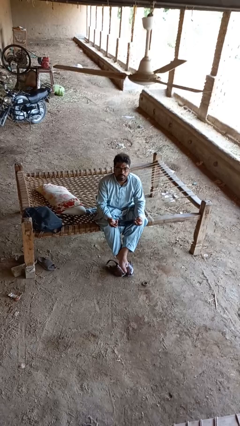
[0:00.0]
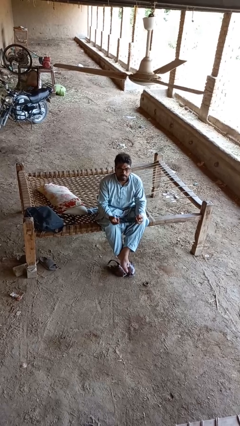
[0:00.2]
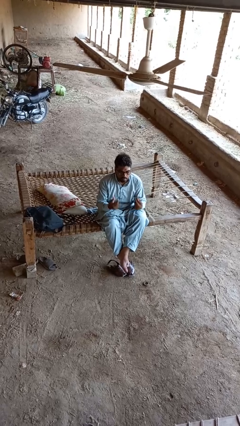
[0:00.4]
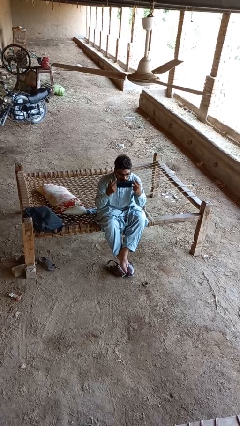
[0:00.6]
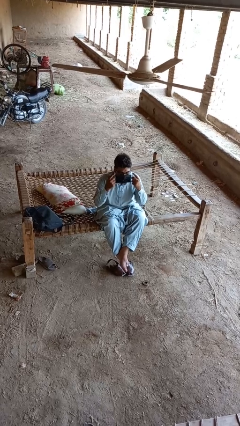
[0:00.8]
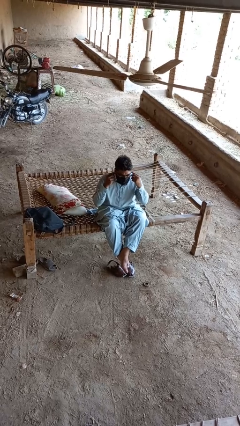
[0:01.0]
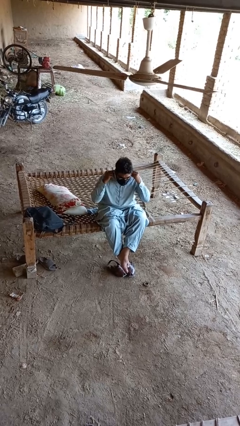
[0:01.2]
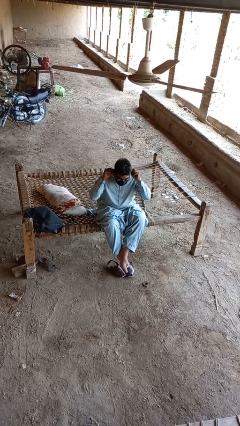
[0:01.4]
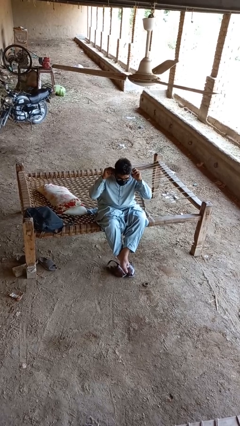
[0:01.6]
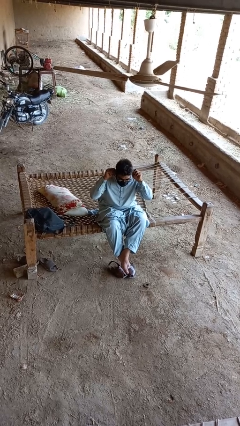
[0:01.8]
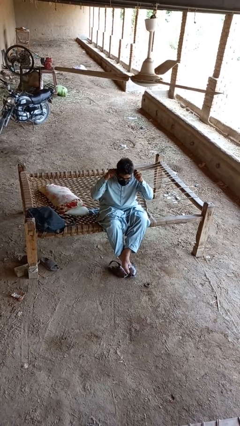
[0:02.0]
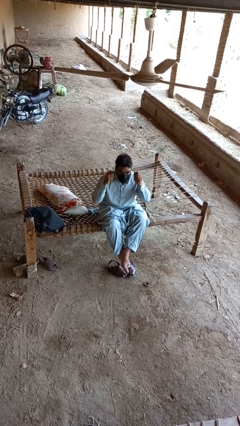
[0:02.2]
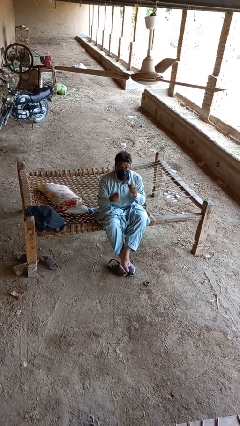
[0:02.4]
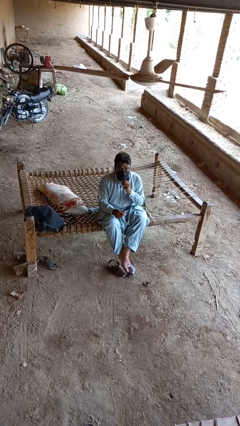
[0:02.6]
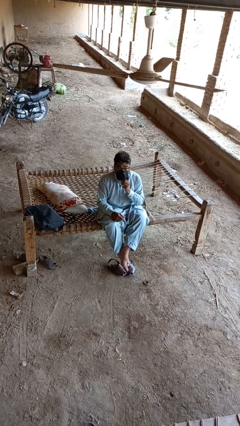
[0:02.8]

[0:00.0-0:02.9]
person puts on facemask

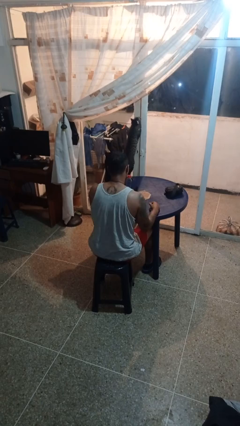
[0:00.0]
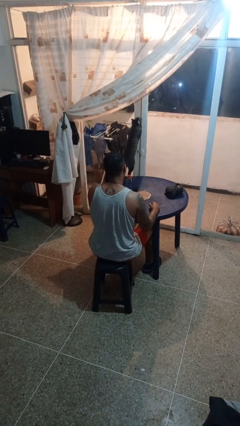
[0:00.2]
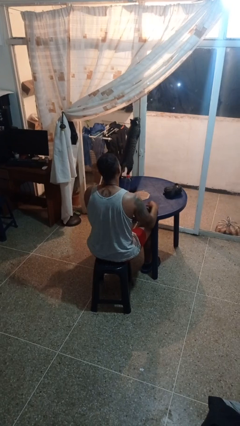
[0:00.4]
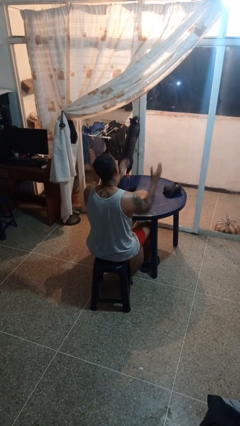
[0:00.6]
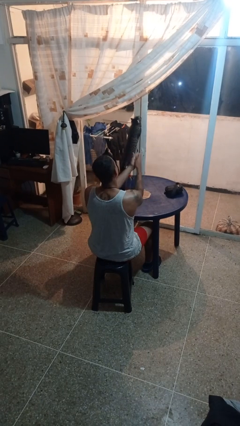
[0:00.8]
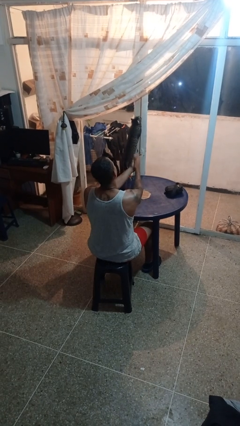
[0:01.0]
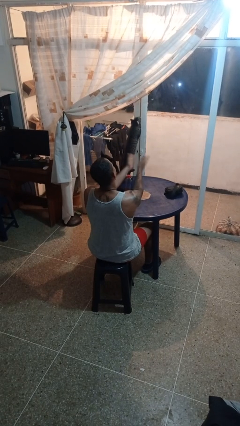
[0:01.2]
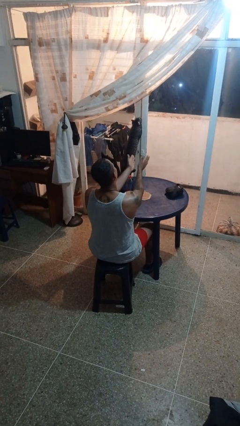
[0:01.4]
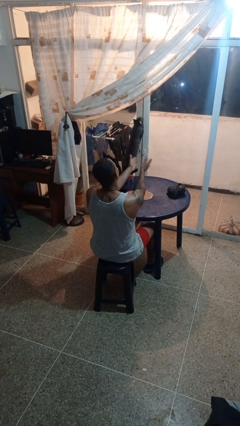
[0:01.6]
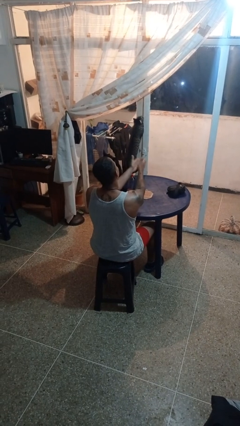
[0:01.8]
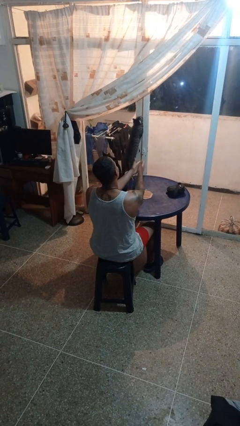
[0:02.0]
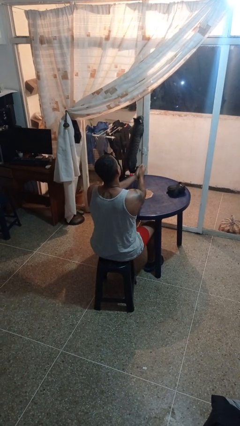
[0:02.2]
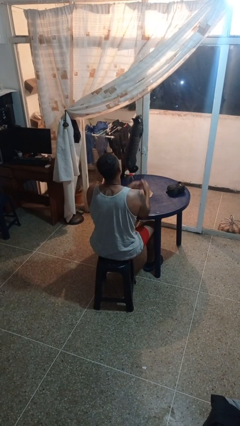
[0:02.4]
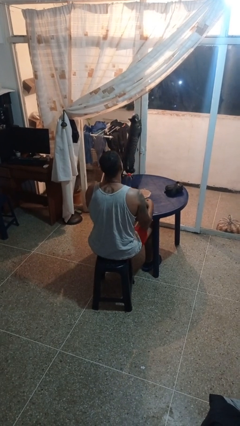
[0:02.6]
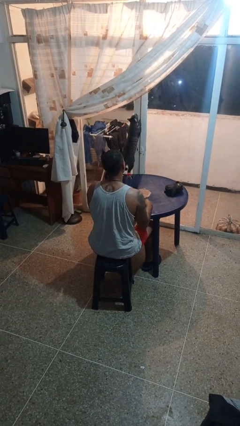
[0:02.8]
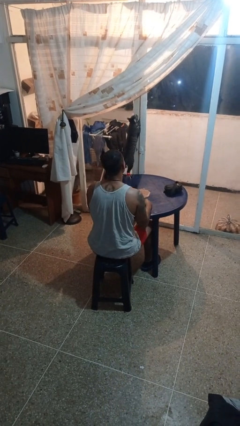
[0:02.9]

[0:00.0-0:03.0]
person claps hands

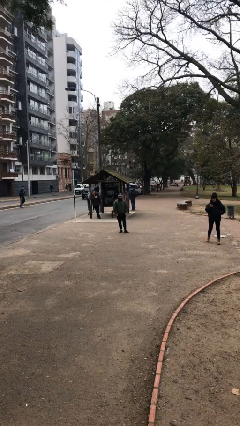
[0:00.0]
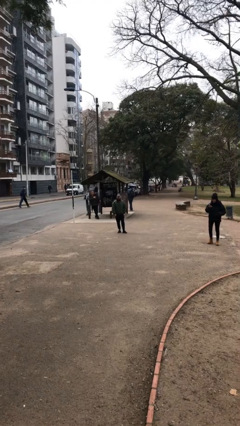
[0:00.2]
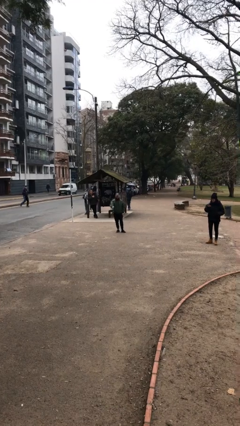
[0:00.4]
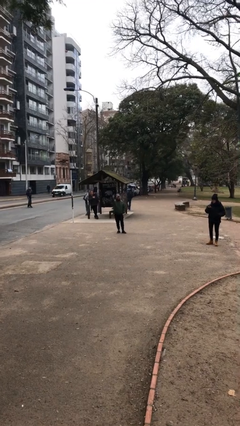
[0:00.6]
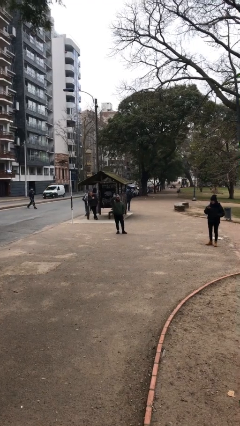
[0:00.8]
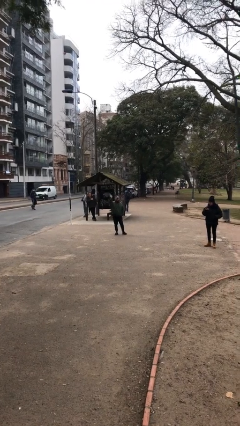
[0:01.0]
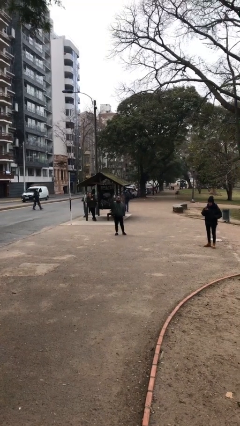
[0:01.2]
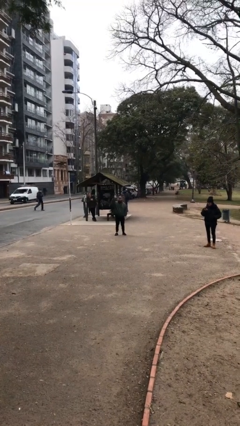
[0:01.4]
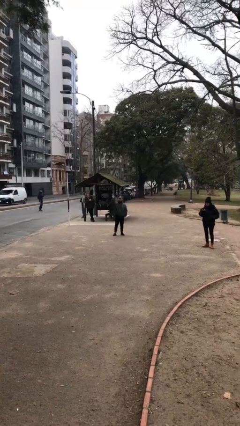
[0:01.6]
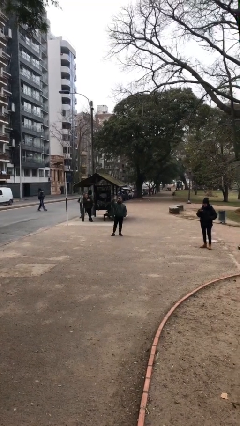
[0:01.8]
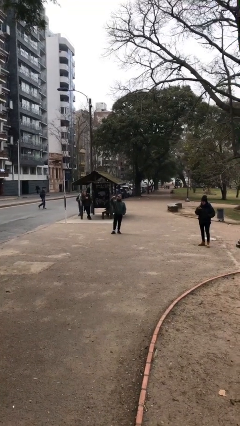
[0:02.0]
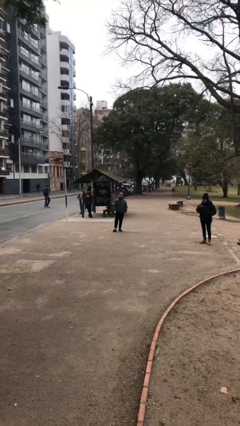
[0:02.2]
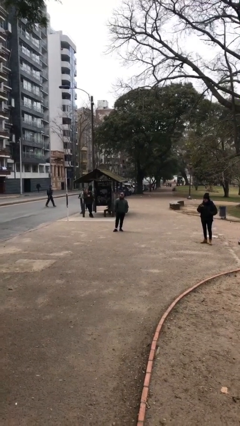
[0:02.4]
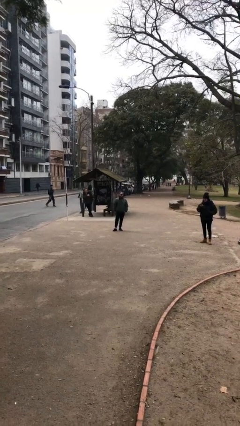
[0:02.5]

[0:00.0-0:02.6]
person waves at person

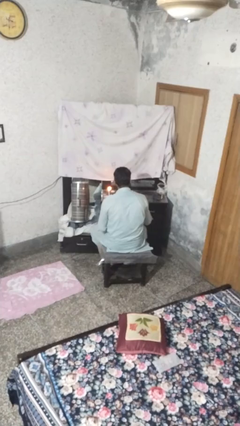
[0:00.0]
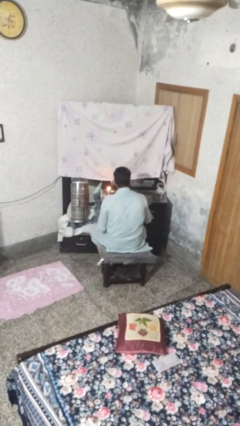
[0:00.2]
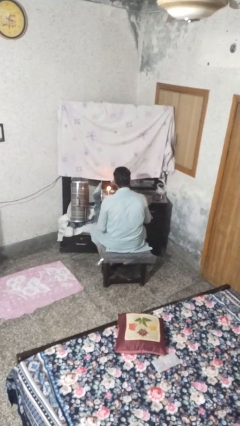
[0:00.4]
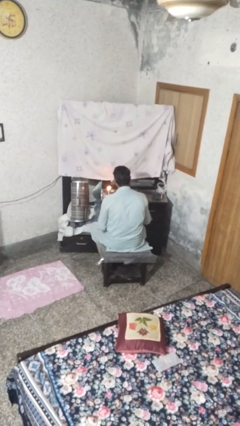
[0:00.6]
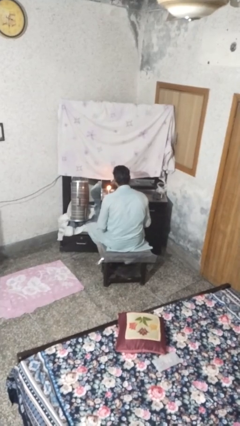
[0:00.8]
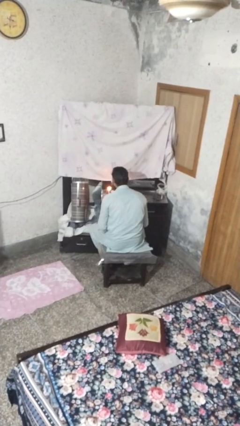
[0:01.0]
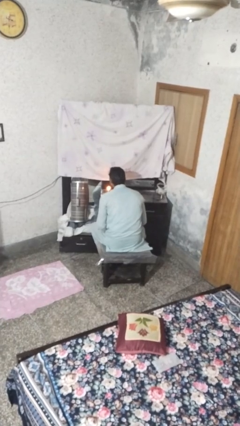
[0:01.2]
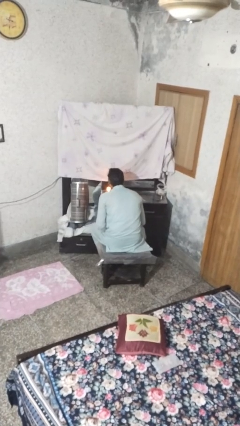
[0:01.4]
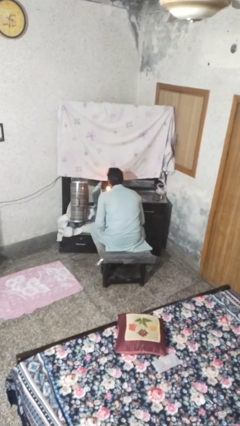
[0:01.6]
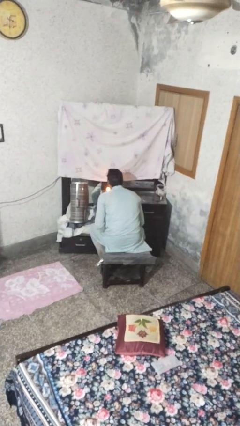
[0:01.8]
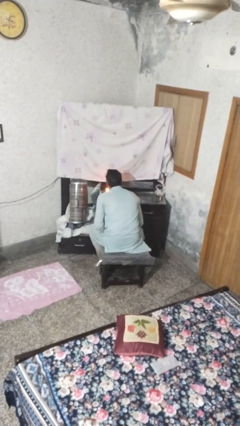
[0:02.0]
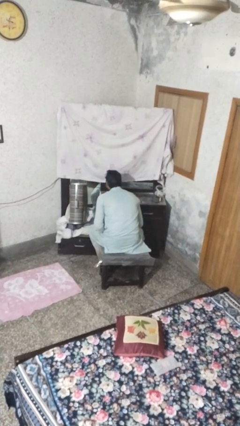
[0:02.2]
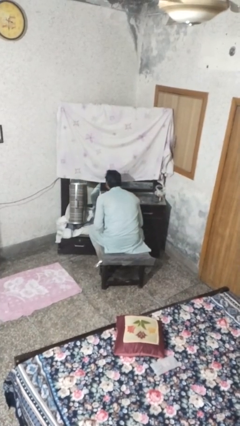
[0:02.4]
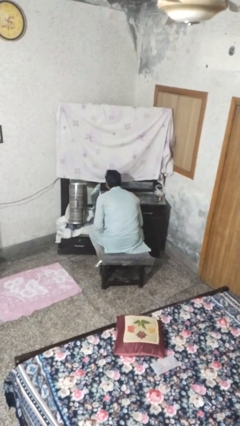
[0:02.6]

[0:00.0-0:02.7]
person extinguishes candle

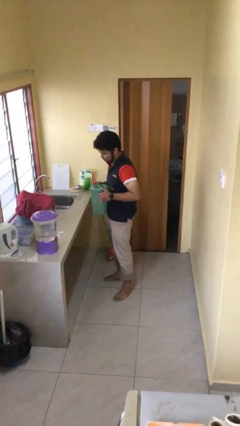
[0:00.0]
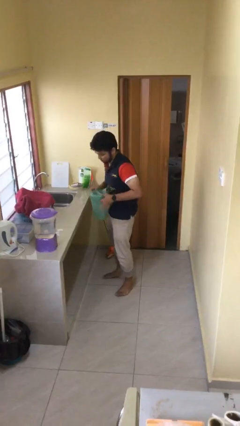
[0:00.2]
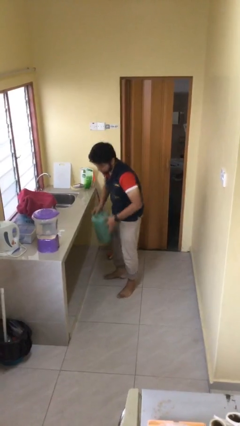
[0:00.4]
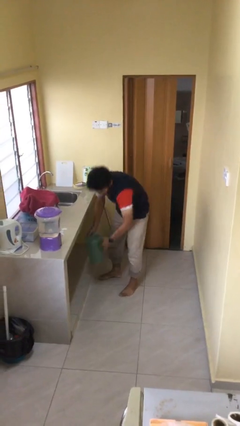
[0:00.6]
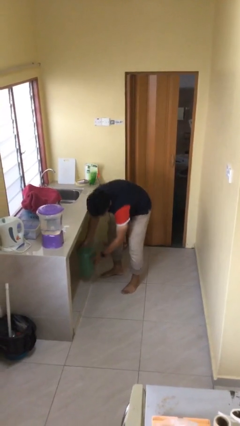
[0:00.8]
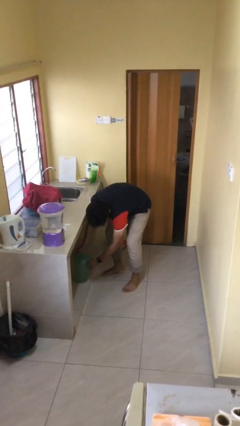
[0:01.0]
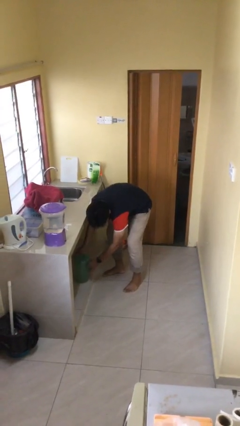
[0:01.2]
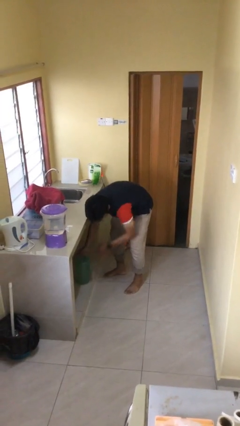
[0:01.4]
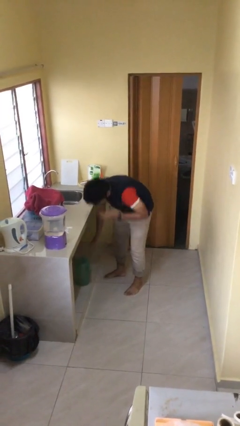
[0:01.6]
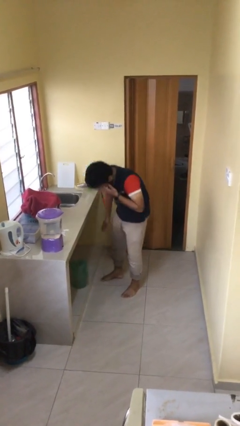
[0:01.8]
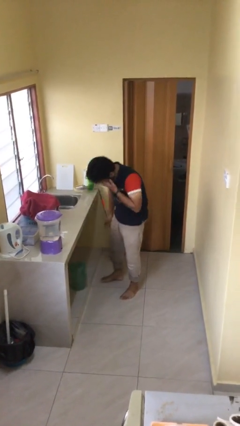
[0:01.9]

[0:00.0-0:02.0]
person puts down object into cabinet

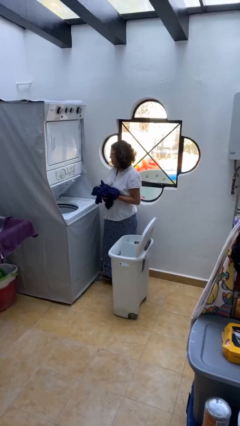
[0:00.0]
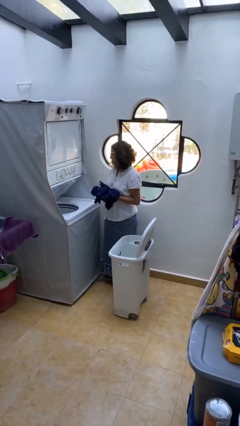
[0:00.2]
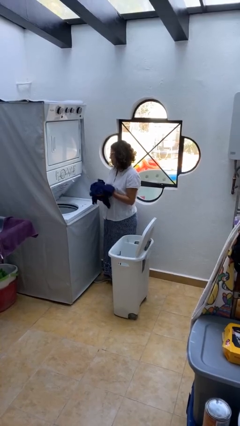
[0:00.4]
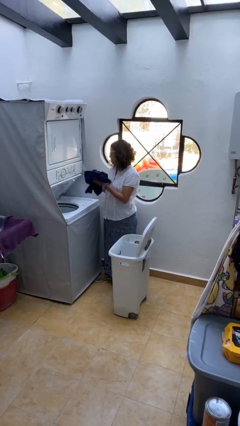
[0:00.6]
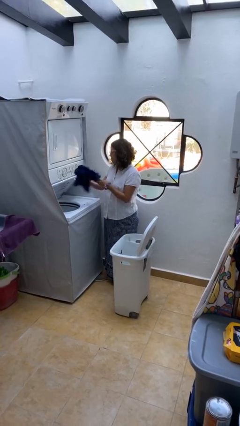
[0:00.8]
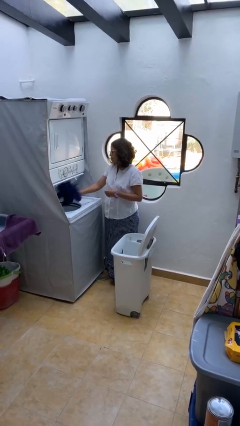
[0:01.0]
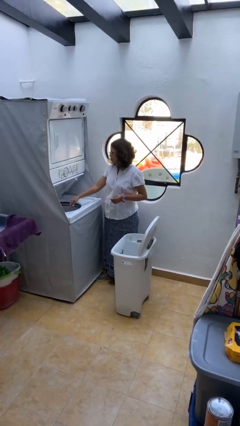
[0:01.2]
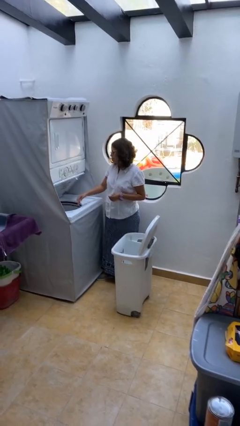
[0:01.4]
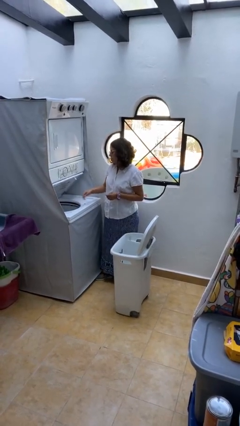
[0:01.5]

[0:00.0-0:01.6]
person loads clotheswasher

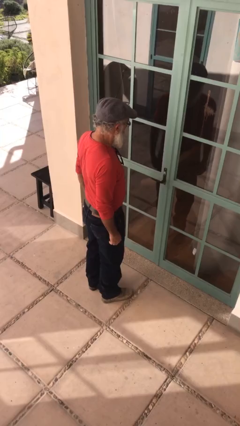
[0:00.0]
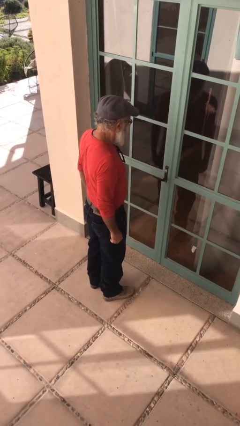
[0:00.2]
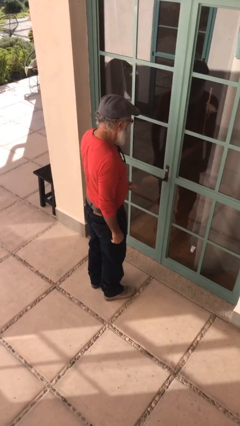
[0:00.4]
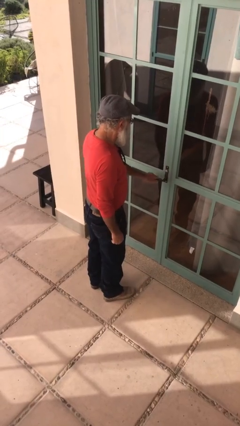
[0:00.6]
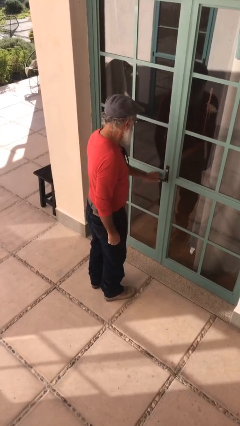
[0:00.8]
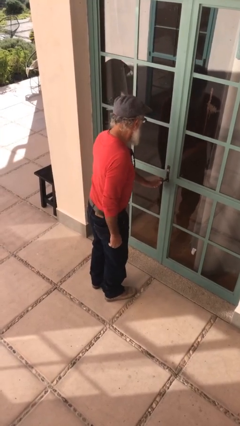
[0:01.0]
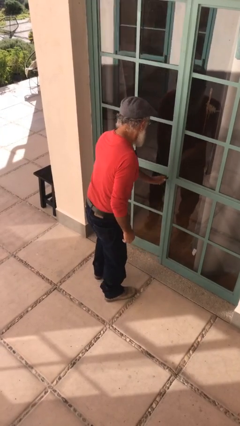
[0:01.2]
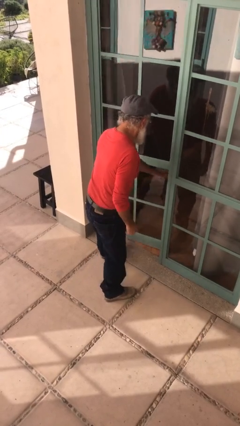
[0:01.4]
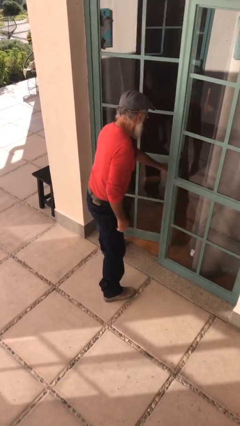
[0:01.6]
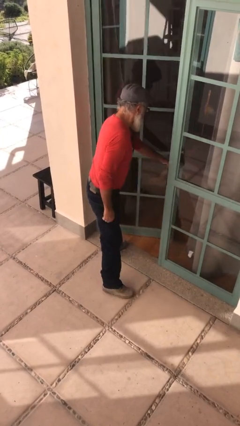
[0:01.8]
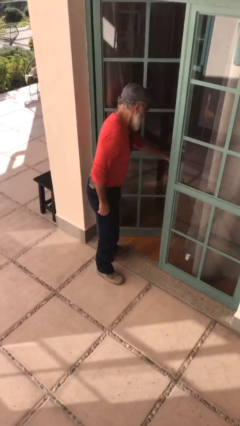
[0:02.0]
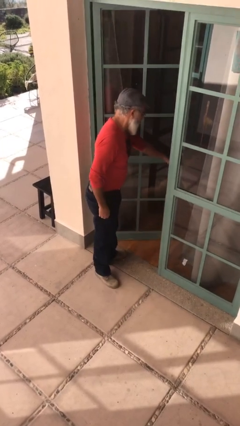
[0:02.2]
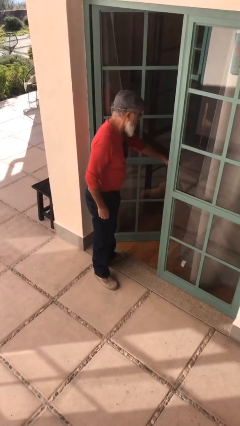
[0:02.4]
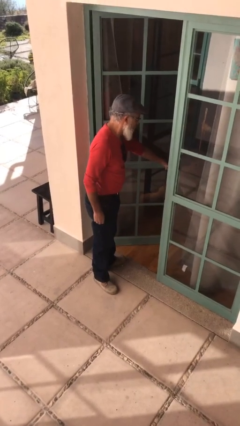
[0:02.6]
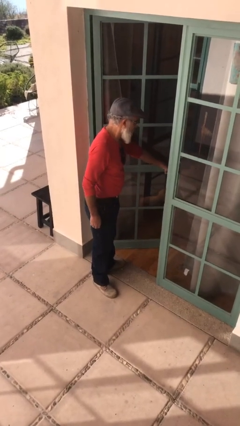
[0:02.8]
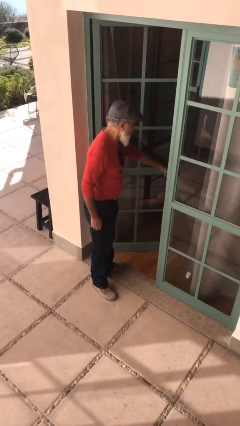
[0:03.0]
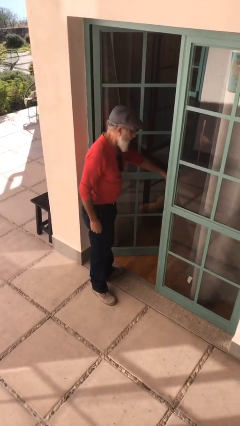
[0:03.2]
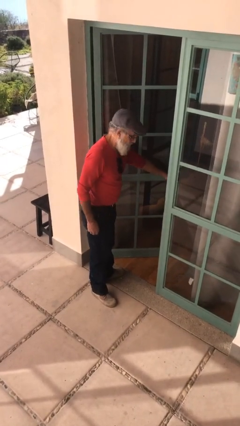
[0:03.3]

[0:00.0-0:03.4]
person opens facility door
